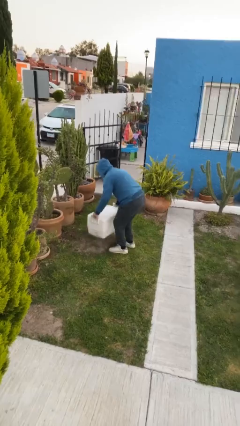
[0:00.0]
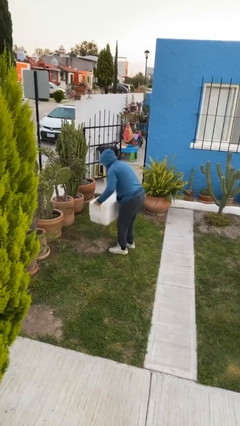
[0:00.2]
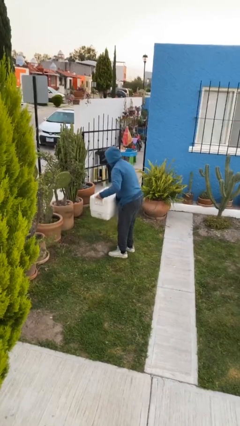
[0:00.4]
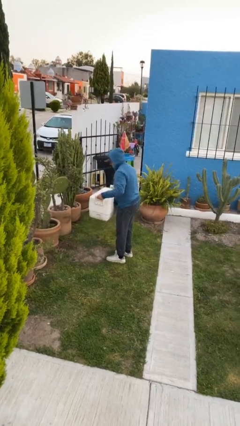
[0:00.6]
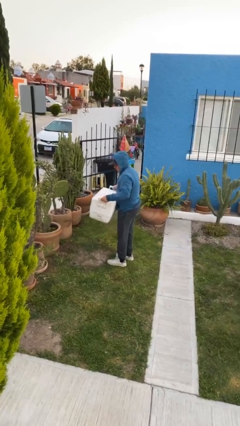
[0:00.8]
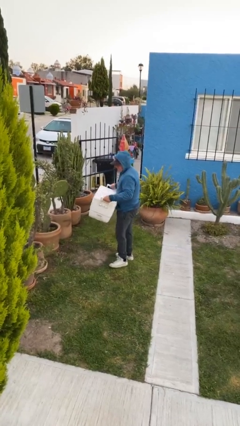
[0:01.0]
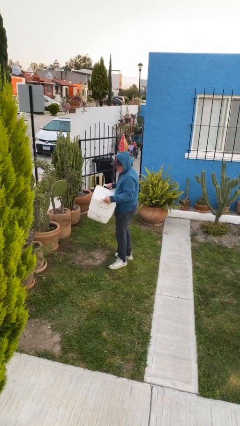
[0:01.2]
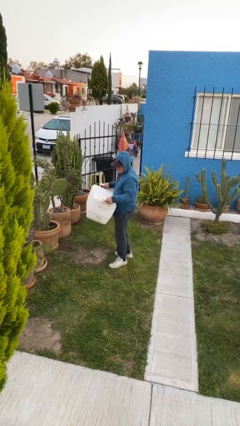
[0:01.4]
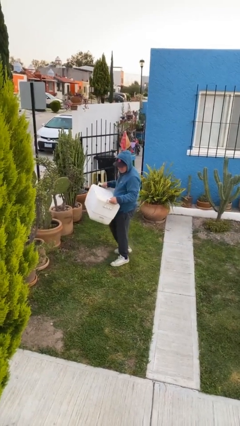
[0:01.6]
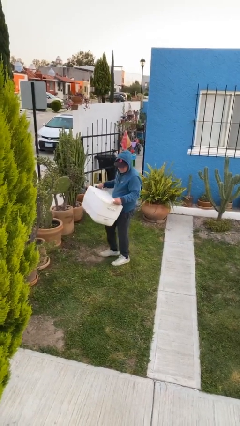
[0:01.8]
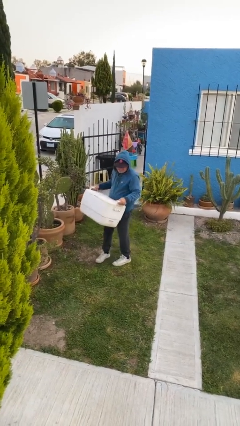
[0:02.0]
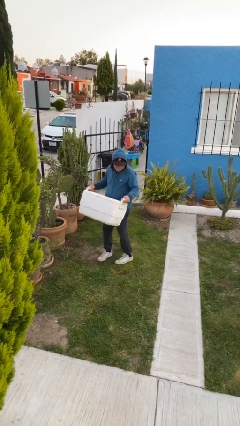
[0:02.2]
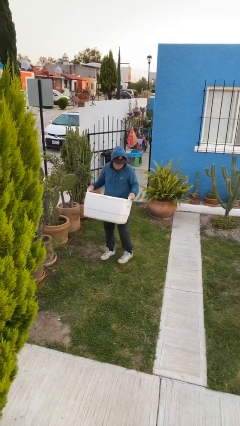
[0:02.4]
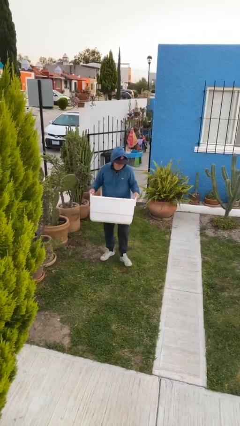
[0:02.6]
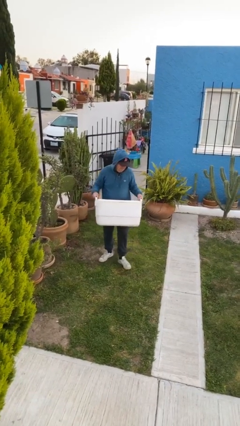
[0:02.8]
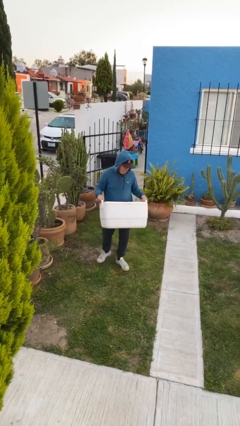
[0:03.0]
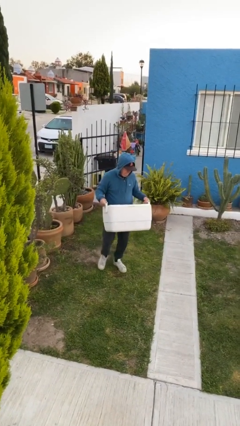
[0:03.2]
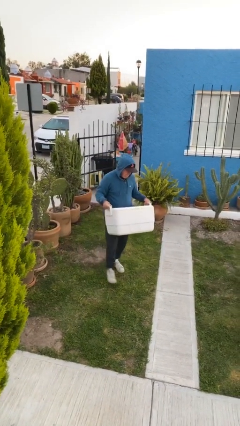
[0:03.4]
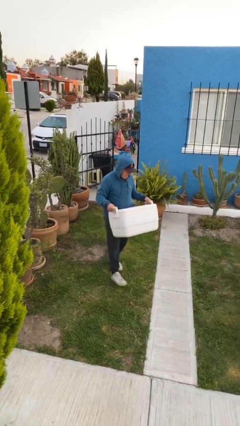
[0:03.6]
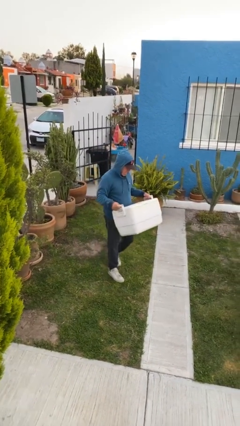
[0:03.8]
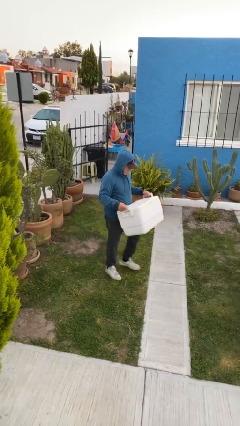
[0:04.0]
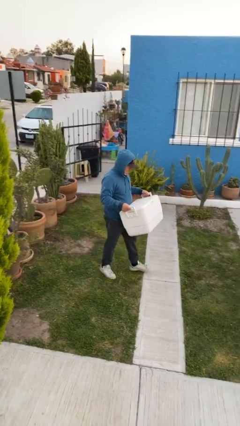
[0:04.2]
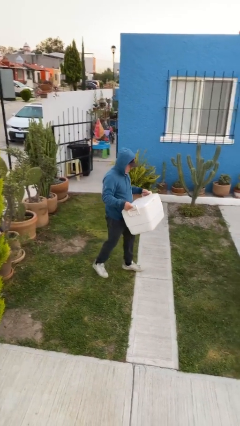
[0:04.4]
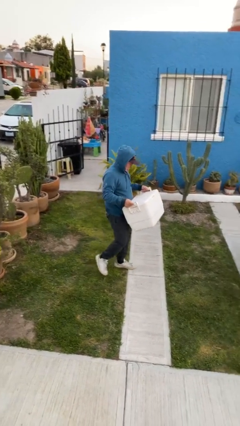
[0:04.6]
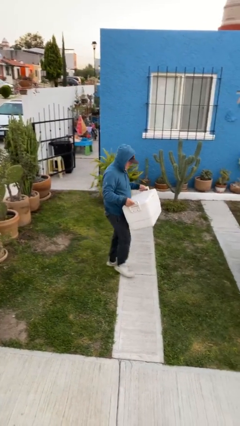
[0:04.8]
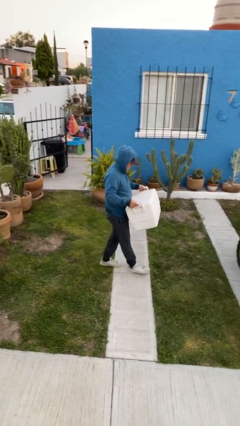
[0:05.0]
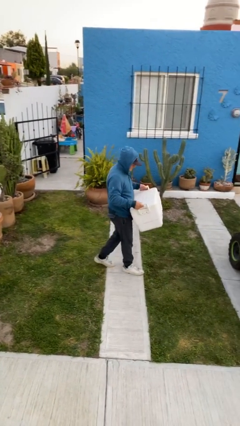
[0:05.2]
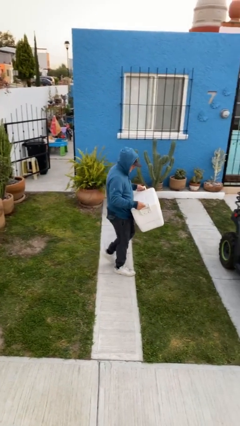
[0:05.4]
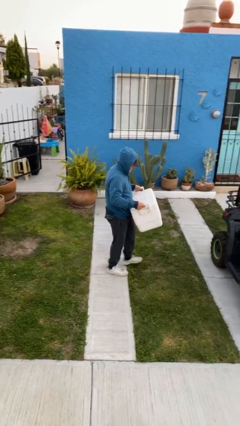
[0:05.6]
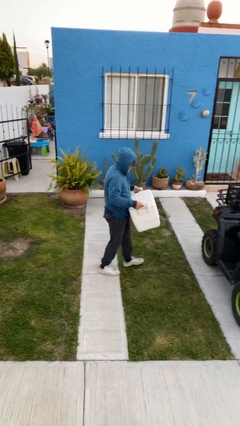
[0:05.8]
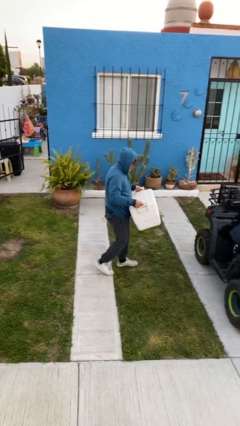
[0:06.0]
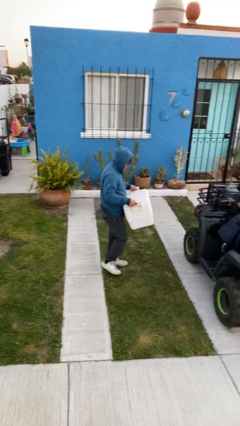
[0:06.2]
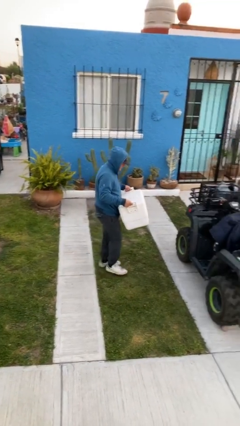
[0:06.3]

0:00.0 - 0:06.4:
person carries heavy object

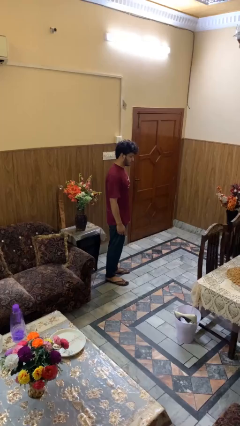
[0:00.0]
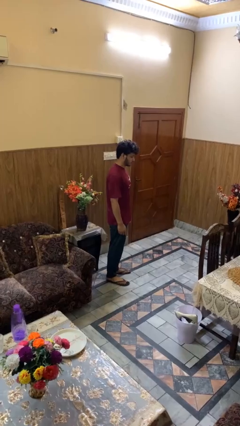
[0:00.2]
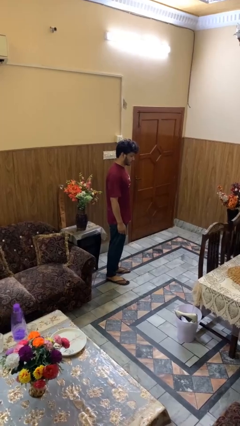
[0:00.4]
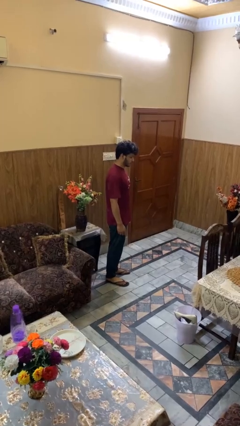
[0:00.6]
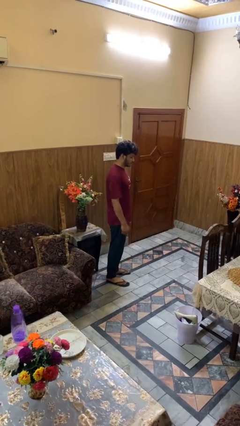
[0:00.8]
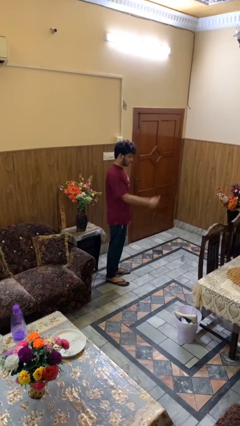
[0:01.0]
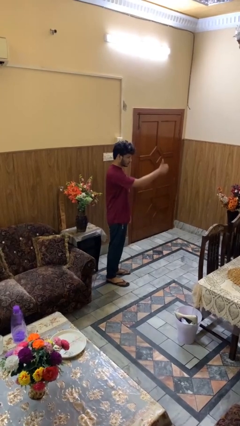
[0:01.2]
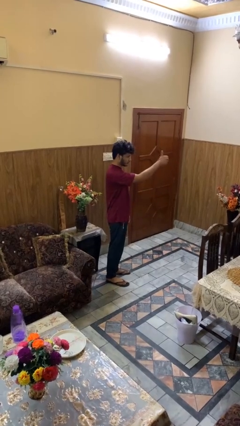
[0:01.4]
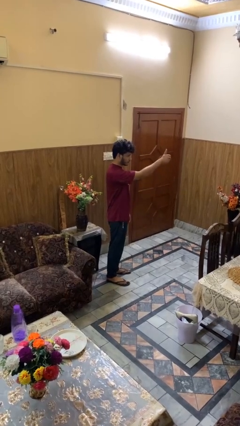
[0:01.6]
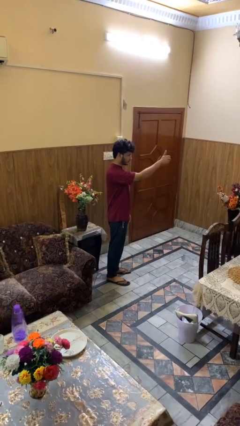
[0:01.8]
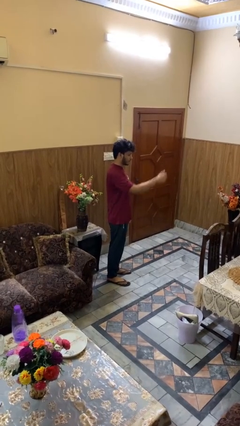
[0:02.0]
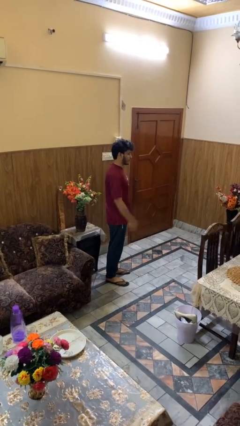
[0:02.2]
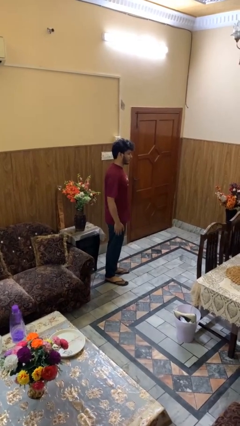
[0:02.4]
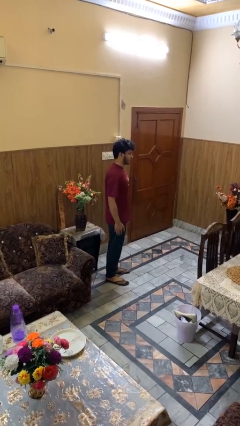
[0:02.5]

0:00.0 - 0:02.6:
person gestures thumbs up

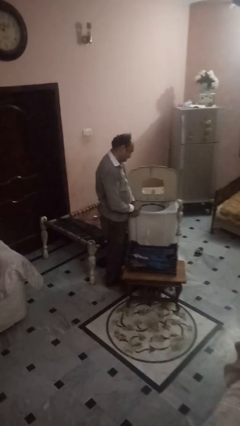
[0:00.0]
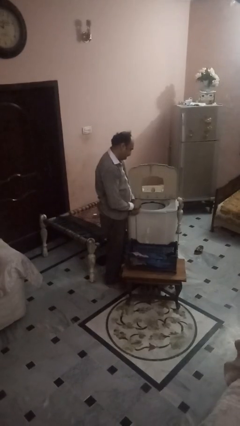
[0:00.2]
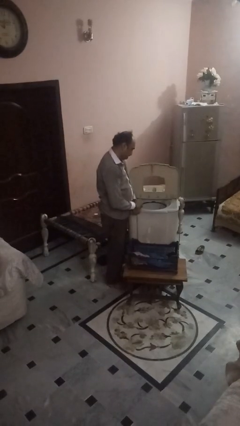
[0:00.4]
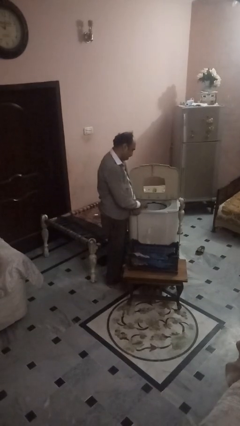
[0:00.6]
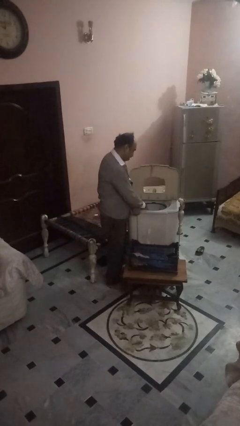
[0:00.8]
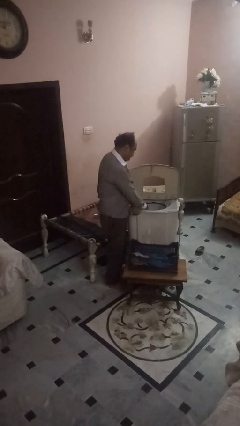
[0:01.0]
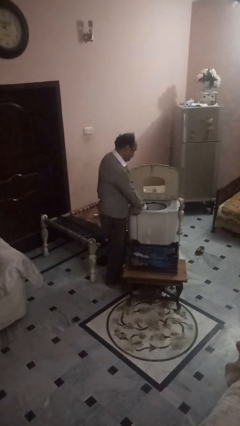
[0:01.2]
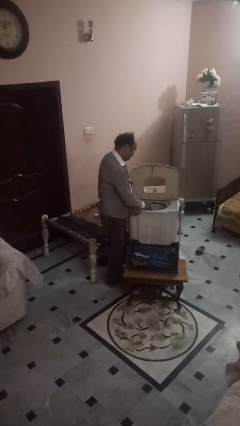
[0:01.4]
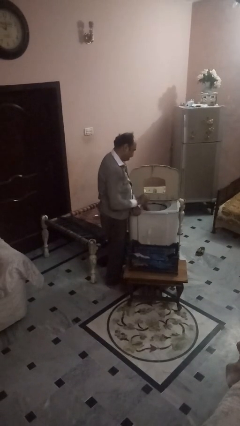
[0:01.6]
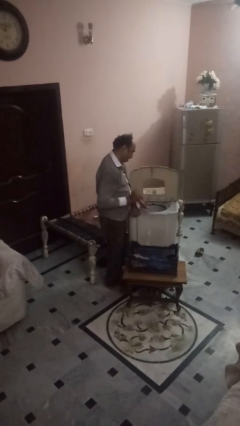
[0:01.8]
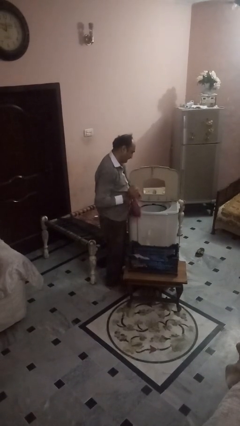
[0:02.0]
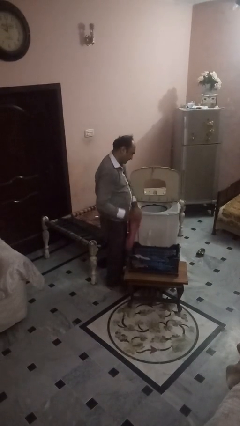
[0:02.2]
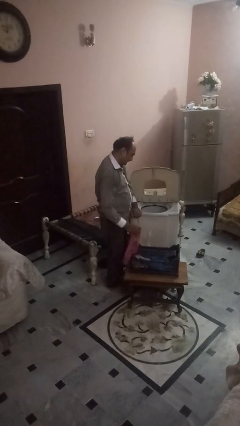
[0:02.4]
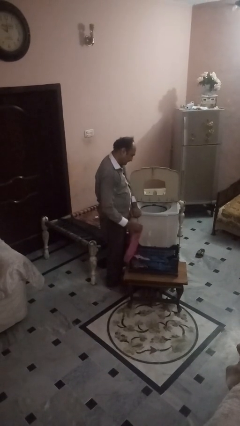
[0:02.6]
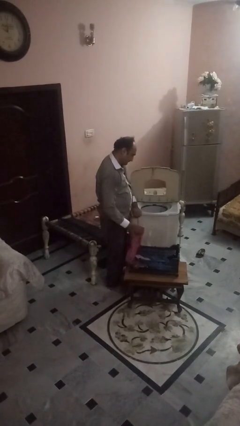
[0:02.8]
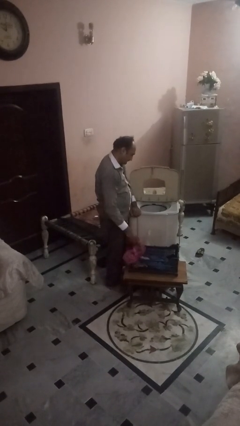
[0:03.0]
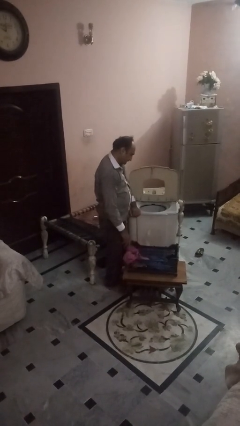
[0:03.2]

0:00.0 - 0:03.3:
person unloads dryer

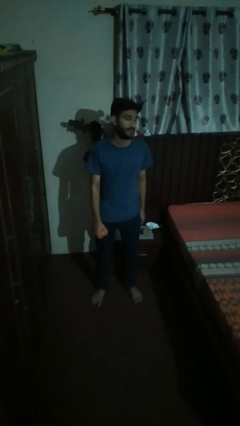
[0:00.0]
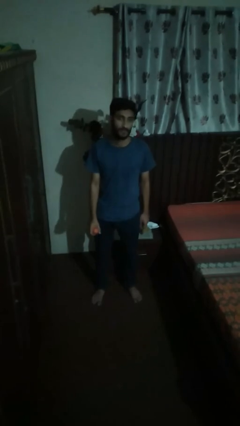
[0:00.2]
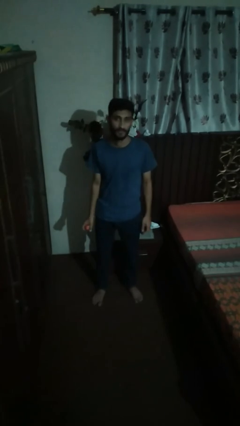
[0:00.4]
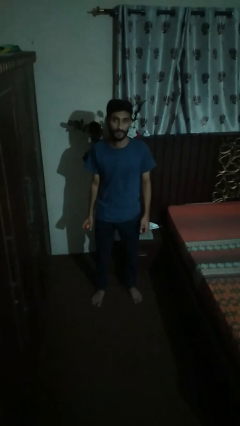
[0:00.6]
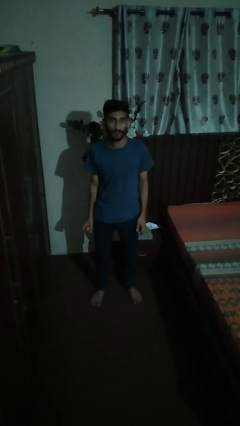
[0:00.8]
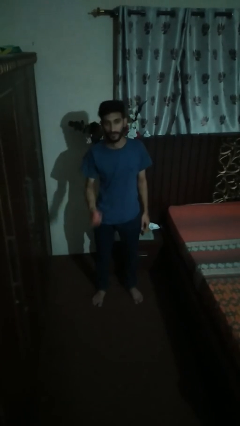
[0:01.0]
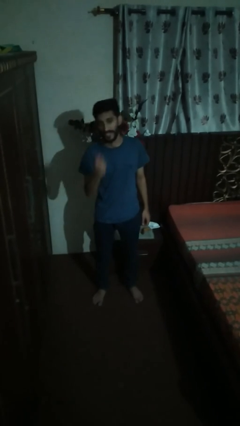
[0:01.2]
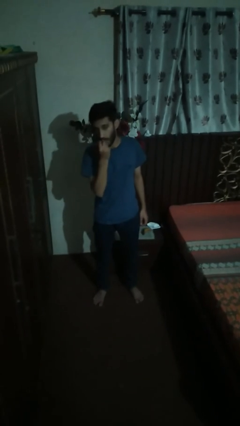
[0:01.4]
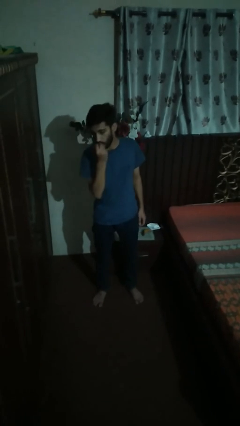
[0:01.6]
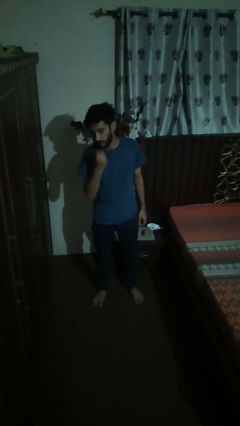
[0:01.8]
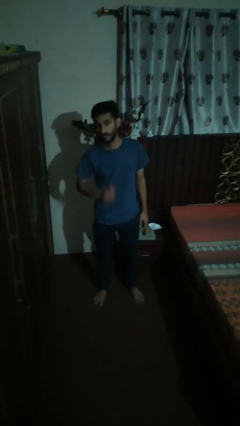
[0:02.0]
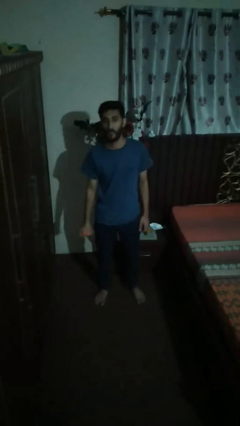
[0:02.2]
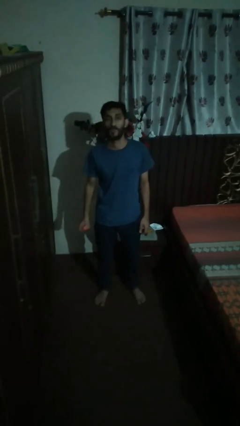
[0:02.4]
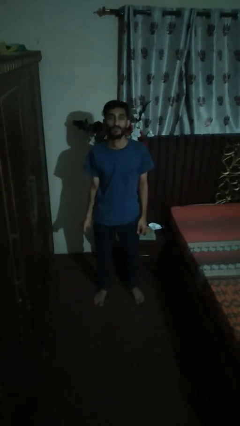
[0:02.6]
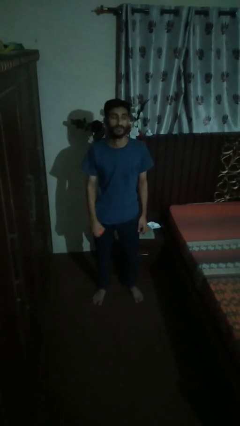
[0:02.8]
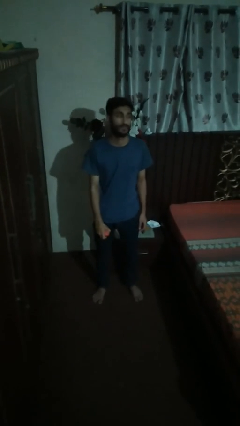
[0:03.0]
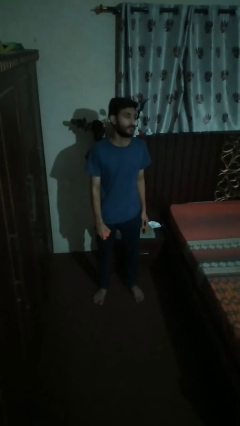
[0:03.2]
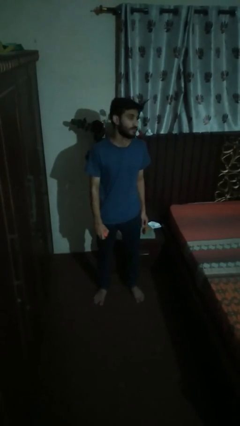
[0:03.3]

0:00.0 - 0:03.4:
person eats apple

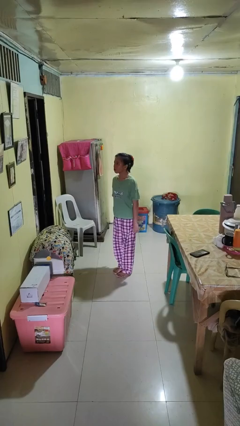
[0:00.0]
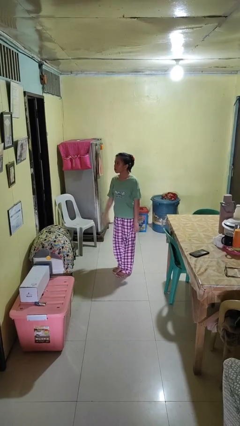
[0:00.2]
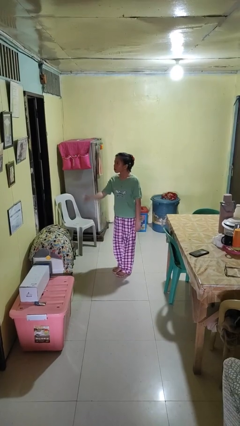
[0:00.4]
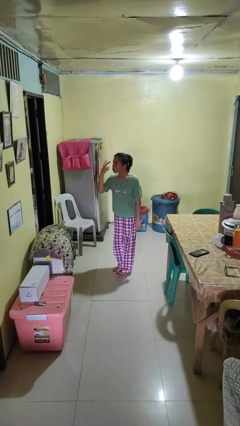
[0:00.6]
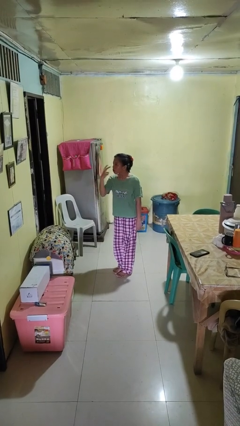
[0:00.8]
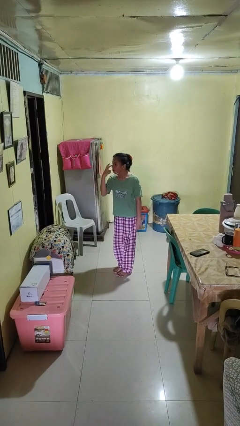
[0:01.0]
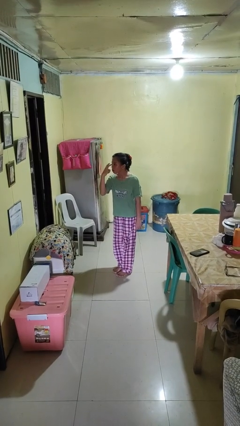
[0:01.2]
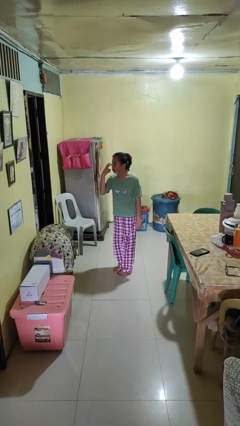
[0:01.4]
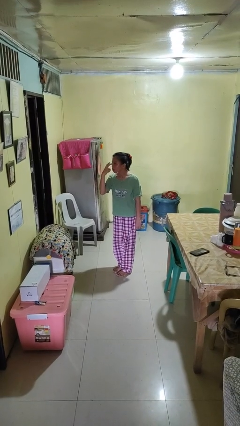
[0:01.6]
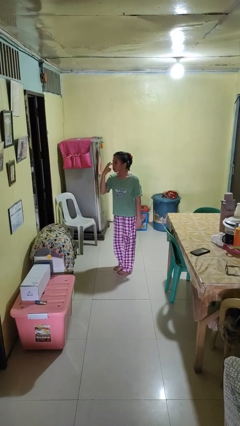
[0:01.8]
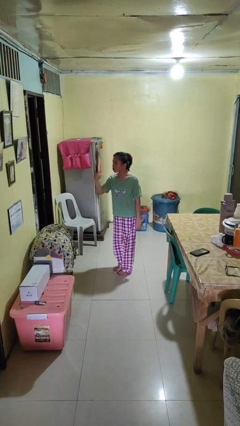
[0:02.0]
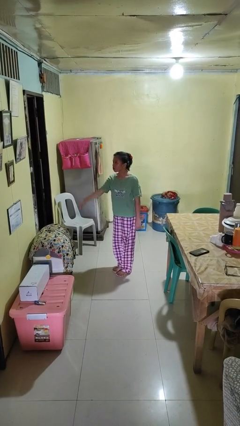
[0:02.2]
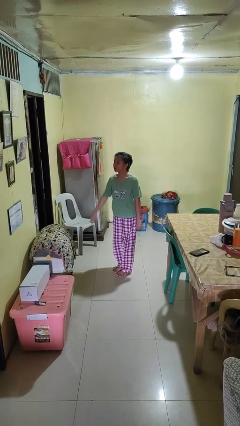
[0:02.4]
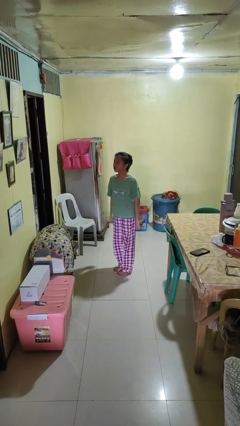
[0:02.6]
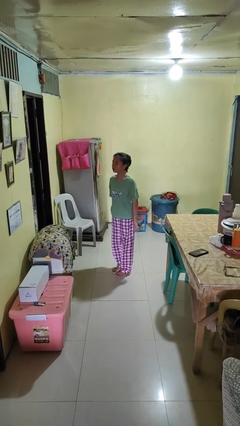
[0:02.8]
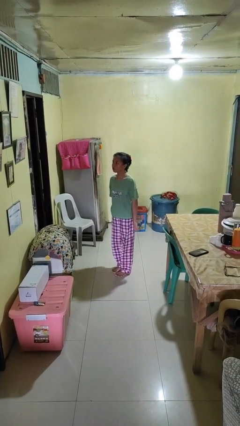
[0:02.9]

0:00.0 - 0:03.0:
person gestures watch closely
